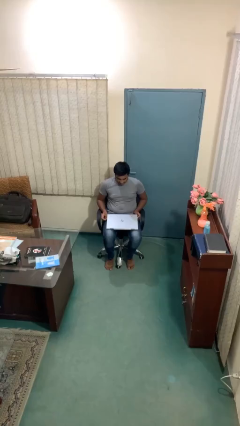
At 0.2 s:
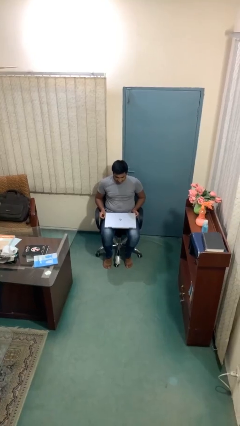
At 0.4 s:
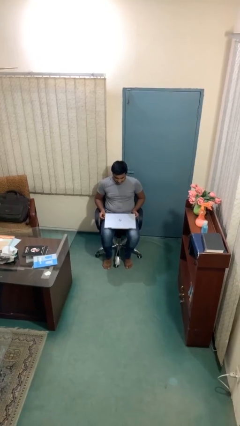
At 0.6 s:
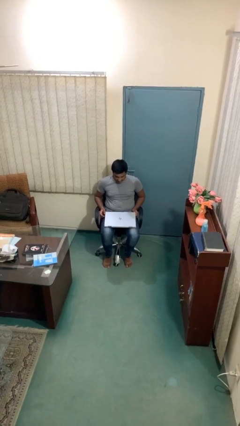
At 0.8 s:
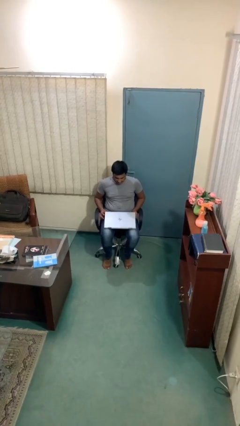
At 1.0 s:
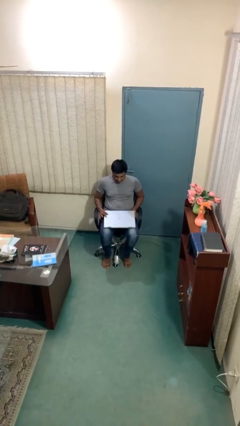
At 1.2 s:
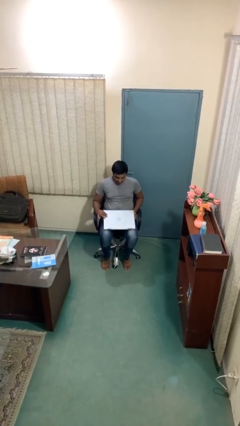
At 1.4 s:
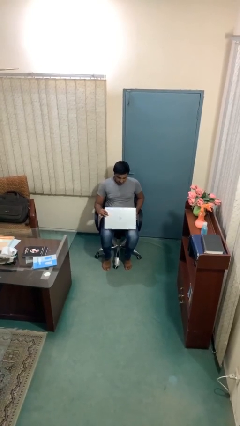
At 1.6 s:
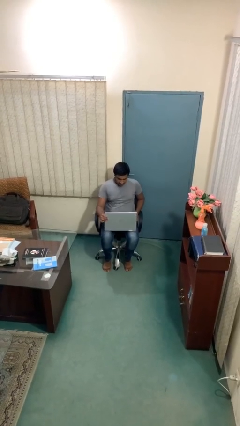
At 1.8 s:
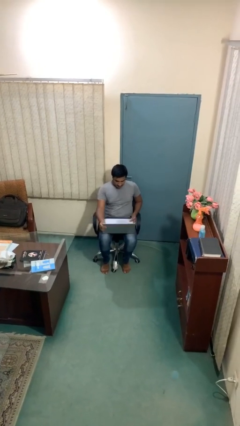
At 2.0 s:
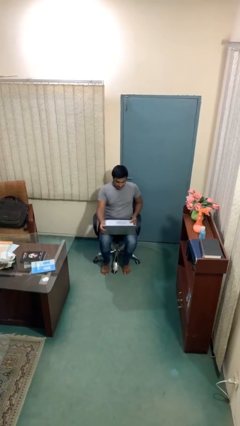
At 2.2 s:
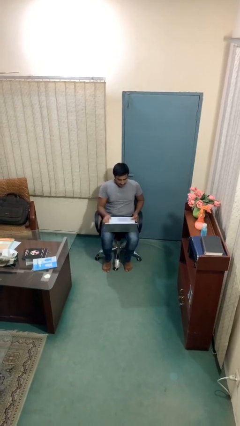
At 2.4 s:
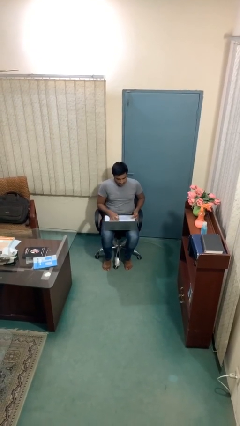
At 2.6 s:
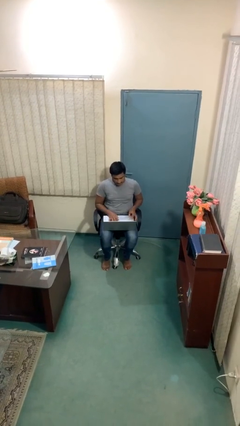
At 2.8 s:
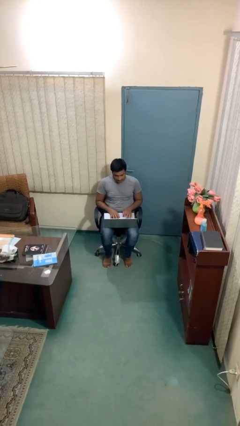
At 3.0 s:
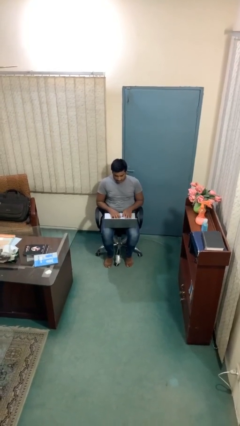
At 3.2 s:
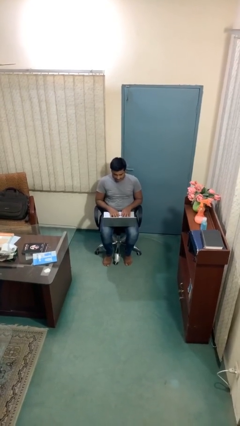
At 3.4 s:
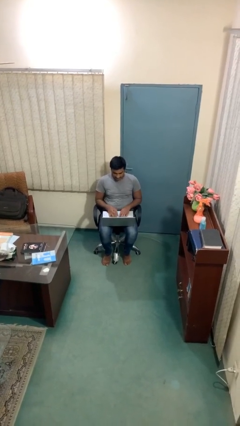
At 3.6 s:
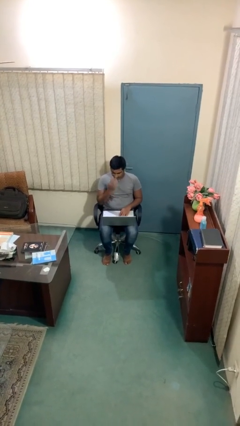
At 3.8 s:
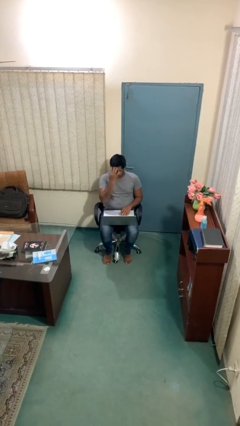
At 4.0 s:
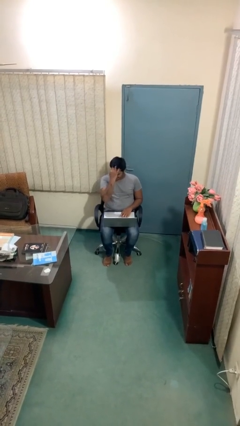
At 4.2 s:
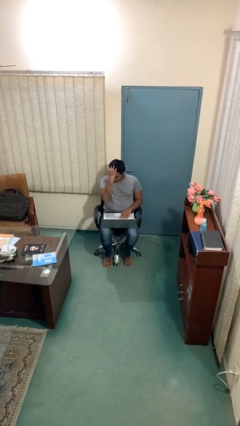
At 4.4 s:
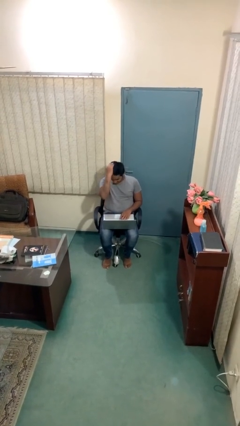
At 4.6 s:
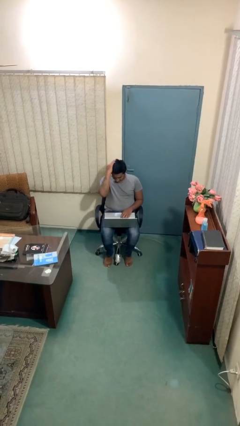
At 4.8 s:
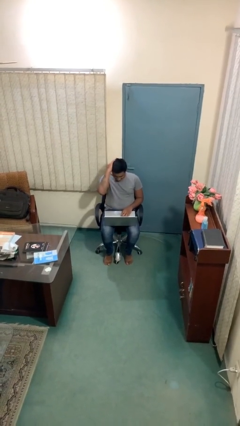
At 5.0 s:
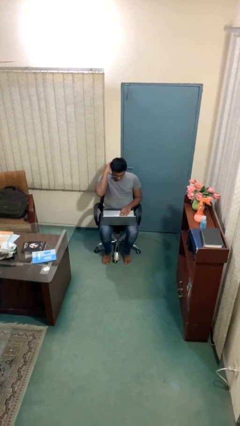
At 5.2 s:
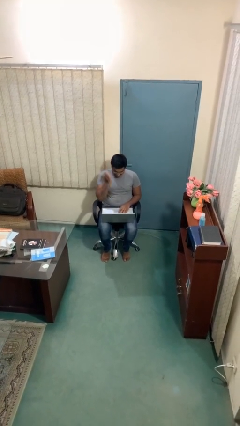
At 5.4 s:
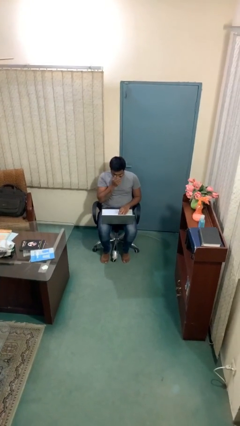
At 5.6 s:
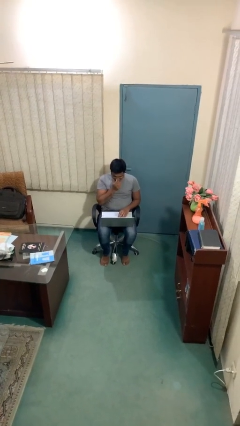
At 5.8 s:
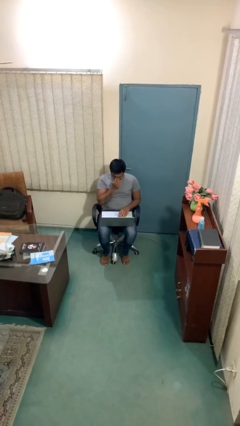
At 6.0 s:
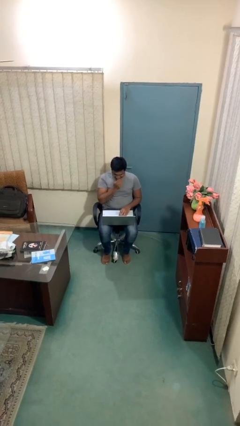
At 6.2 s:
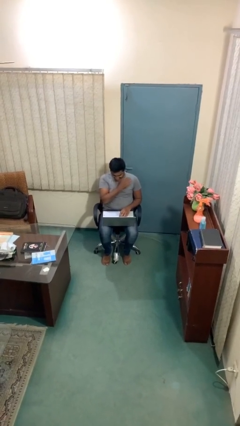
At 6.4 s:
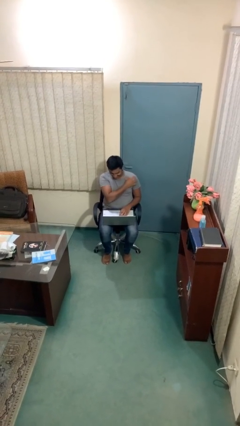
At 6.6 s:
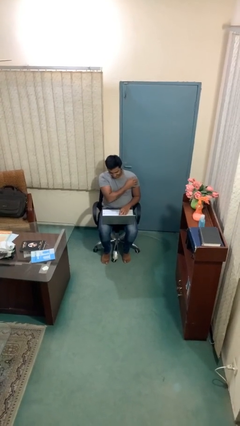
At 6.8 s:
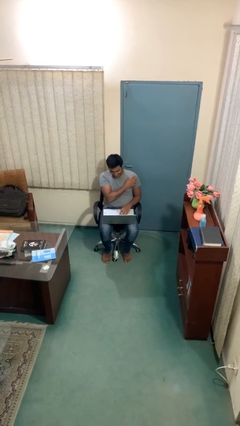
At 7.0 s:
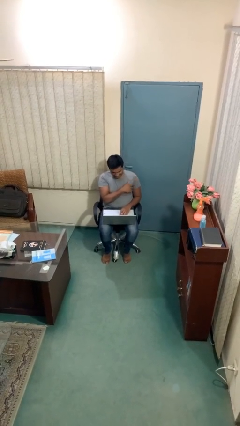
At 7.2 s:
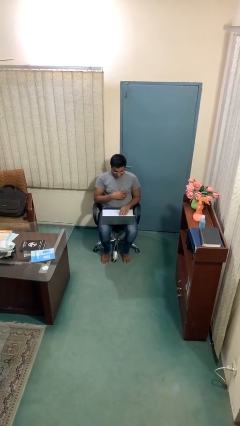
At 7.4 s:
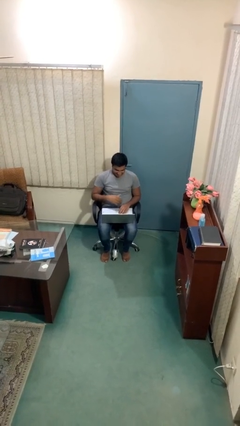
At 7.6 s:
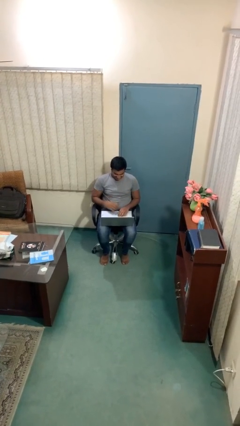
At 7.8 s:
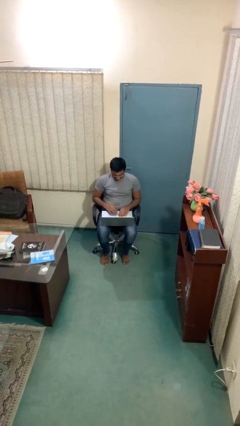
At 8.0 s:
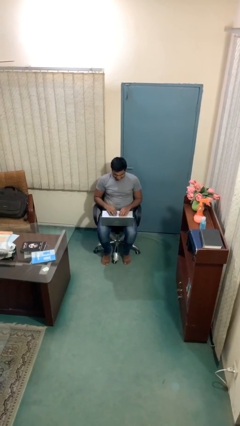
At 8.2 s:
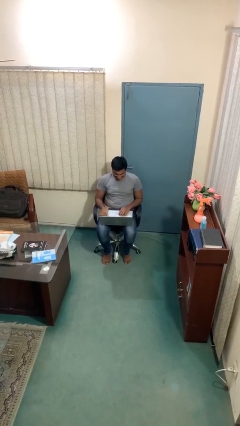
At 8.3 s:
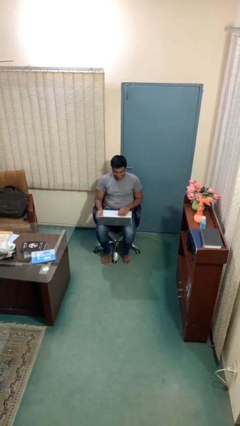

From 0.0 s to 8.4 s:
person interacts with laptop

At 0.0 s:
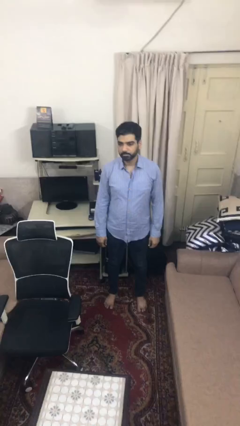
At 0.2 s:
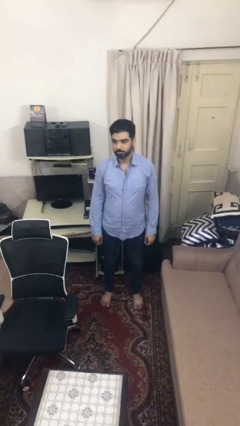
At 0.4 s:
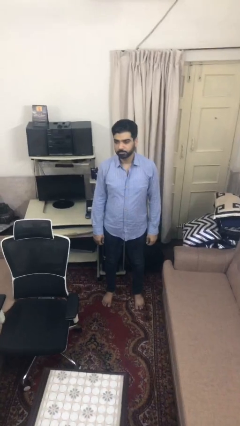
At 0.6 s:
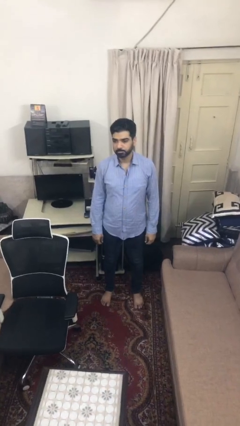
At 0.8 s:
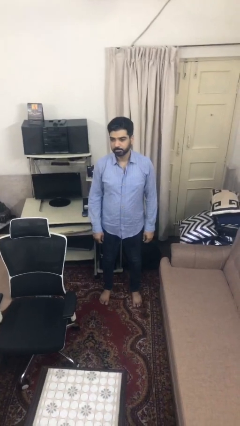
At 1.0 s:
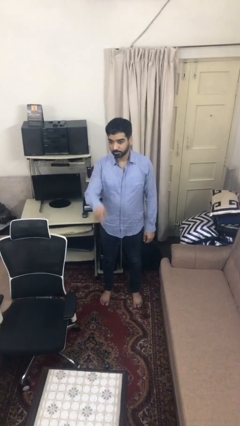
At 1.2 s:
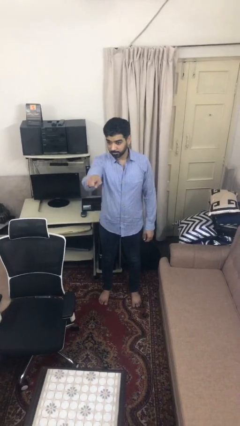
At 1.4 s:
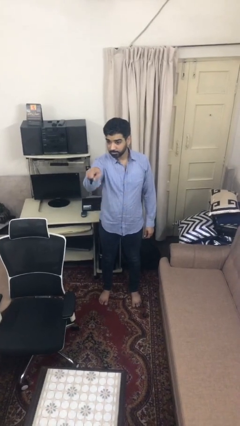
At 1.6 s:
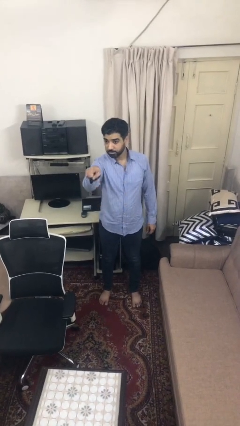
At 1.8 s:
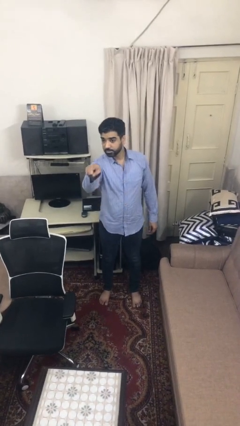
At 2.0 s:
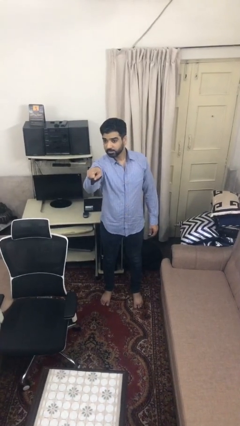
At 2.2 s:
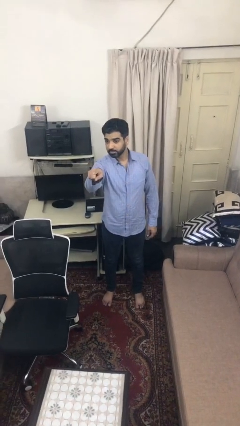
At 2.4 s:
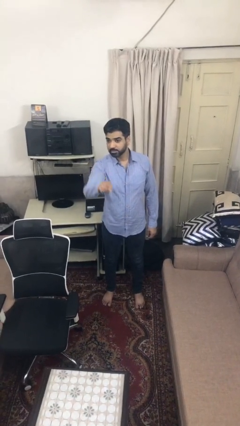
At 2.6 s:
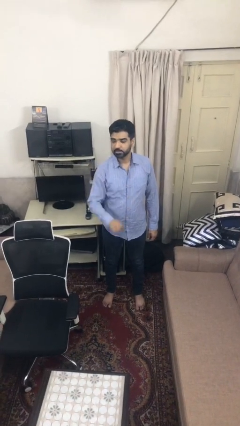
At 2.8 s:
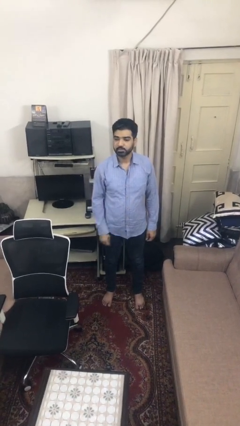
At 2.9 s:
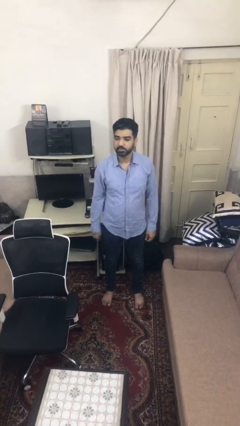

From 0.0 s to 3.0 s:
person points at person

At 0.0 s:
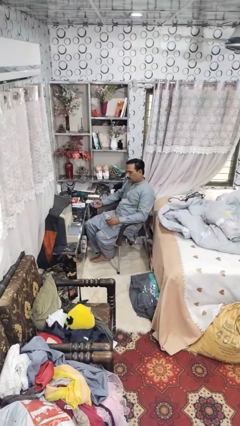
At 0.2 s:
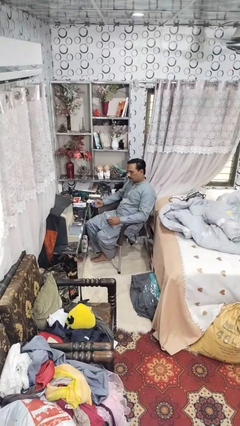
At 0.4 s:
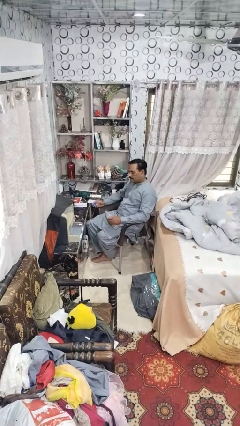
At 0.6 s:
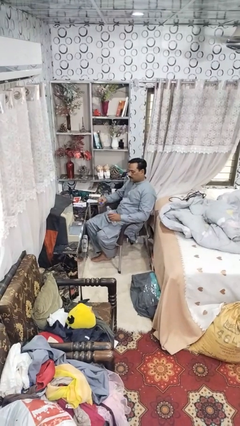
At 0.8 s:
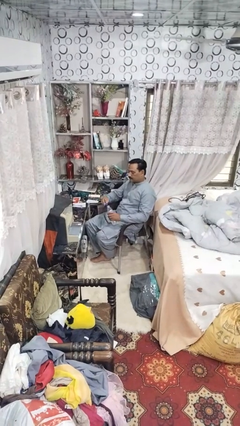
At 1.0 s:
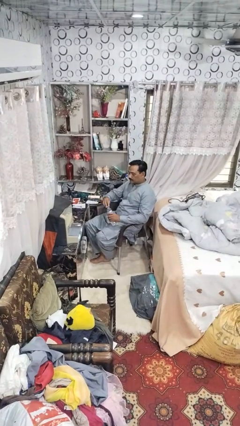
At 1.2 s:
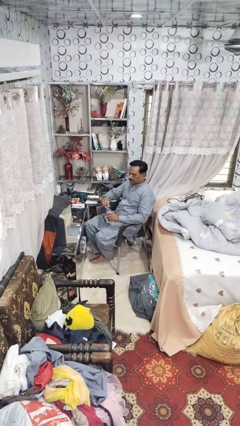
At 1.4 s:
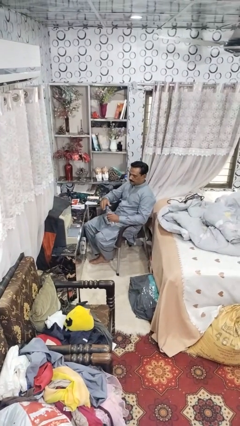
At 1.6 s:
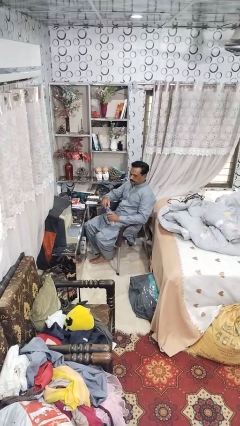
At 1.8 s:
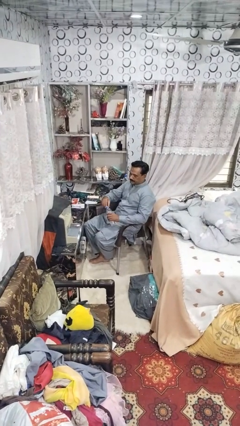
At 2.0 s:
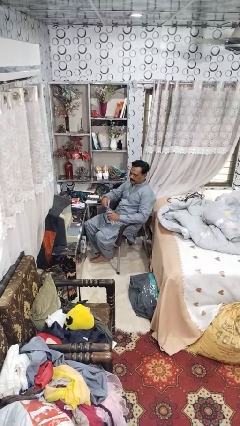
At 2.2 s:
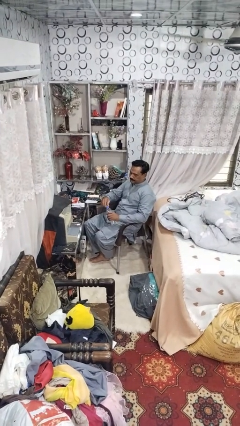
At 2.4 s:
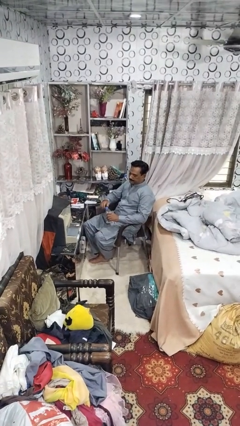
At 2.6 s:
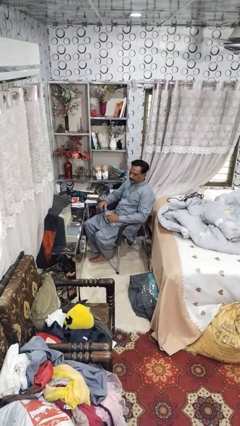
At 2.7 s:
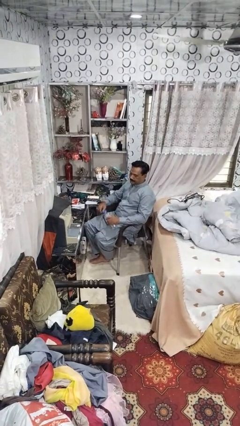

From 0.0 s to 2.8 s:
person screws lid to bottle

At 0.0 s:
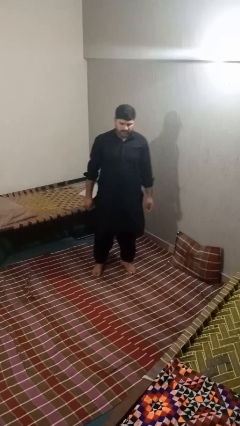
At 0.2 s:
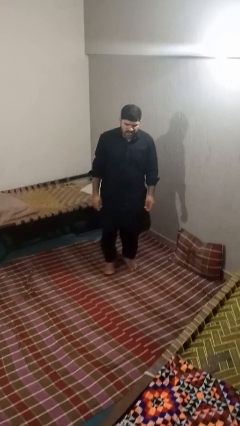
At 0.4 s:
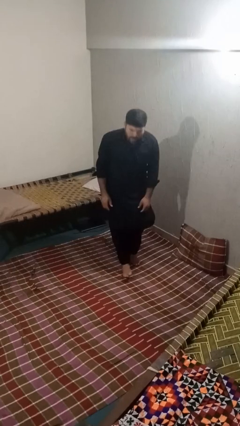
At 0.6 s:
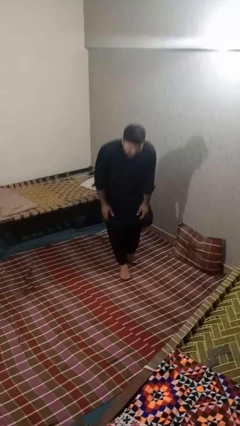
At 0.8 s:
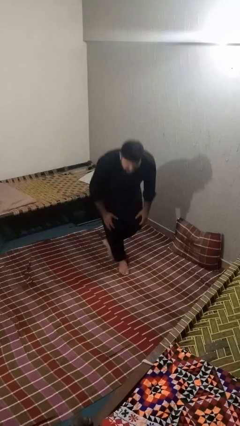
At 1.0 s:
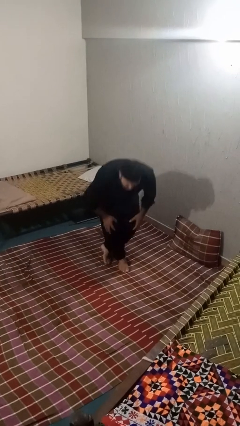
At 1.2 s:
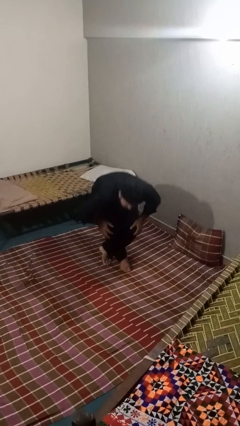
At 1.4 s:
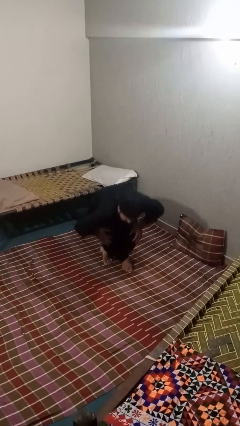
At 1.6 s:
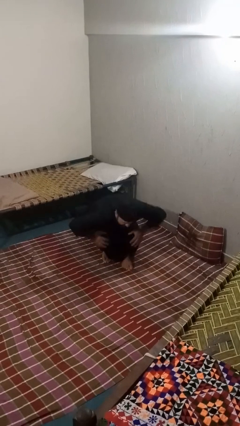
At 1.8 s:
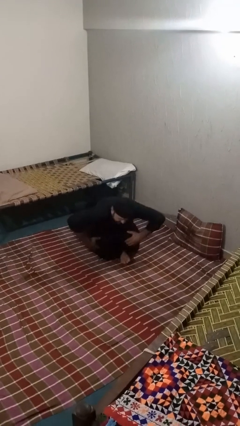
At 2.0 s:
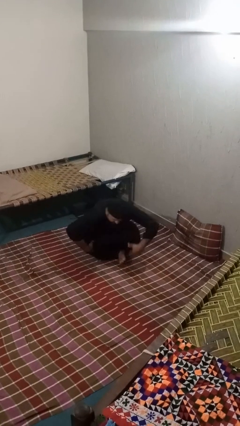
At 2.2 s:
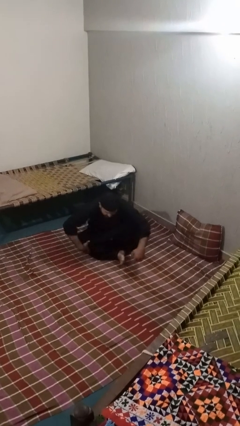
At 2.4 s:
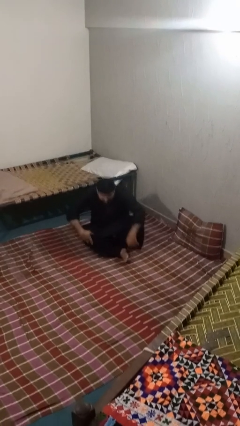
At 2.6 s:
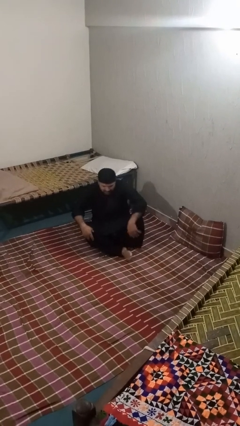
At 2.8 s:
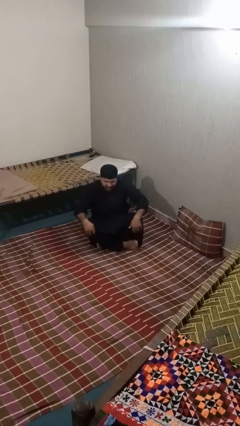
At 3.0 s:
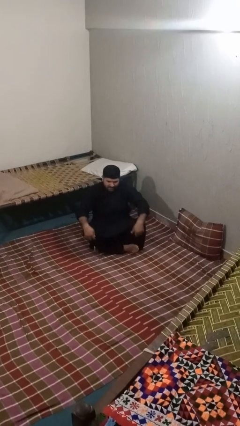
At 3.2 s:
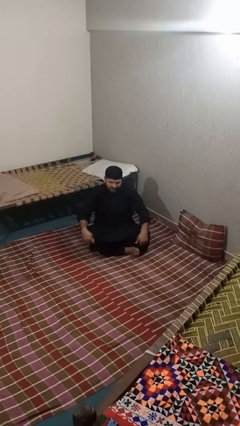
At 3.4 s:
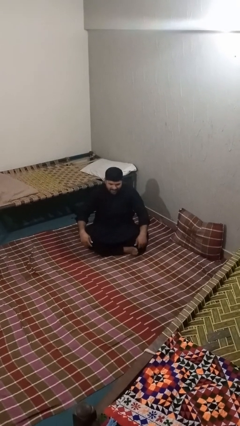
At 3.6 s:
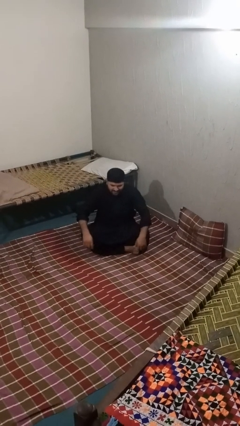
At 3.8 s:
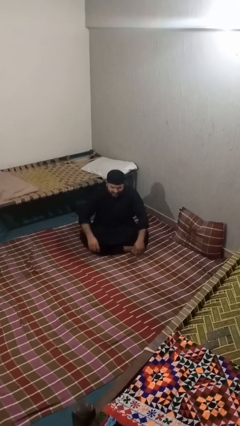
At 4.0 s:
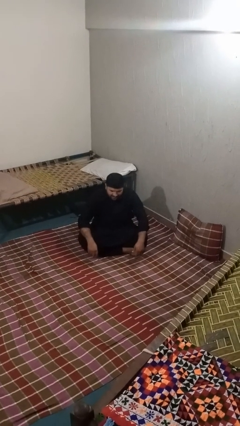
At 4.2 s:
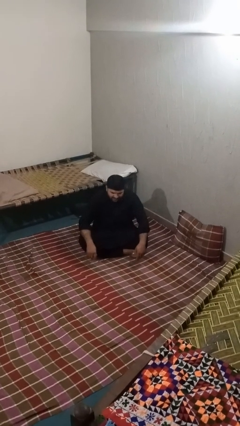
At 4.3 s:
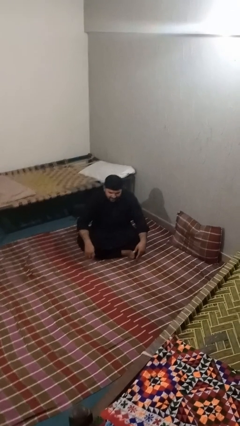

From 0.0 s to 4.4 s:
person sits crisscross
